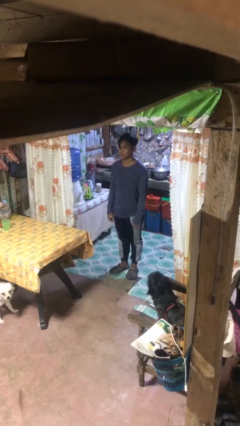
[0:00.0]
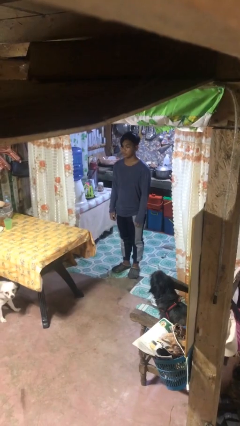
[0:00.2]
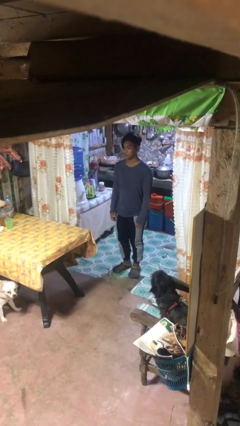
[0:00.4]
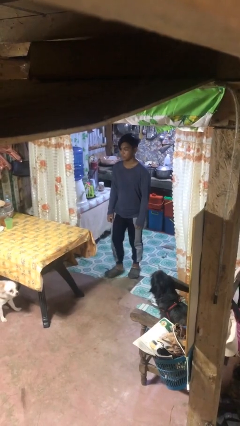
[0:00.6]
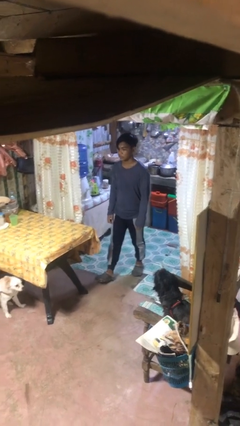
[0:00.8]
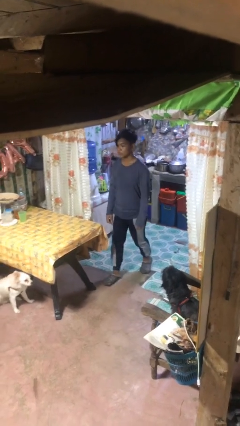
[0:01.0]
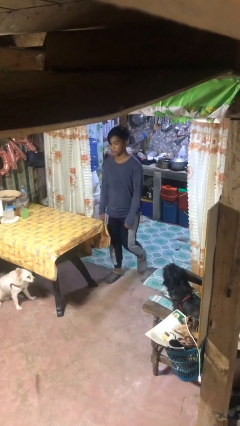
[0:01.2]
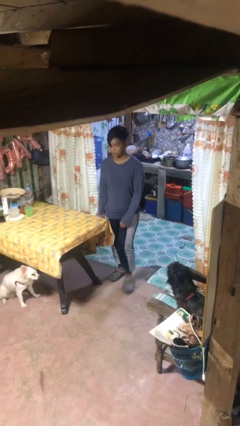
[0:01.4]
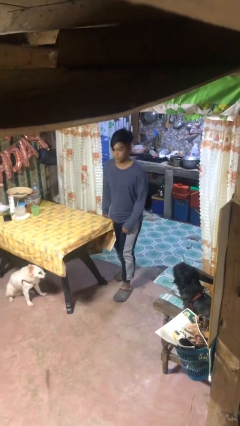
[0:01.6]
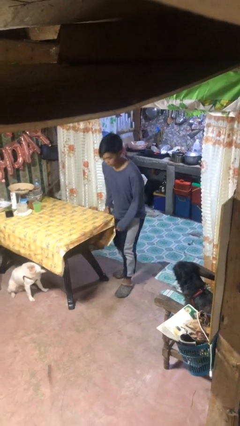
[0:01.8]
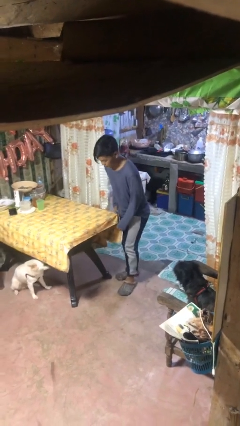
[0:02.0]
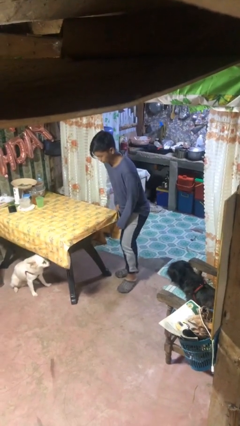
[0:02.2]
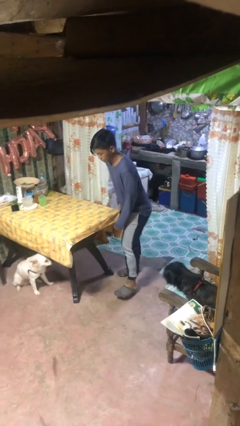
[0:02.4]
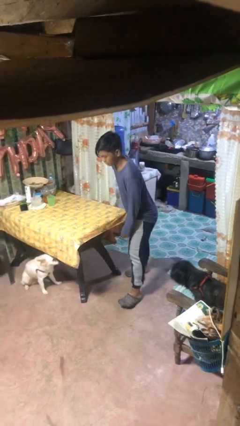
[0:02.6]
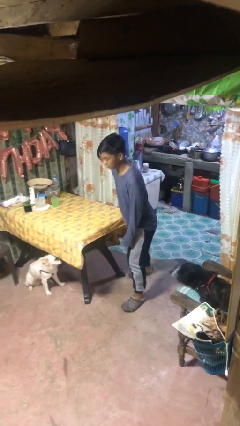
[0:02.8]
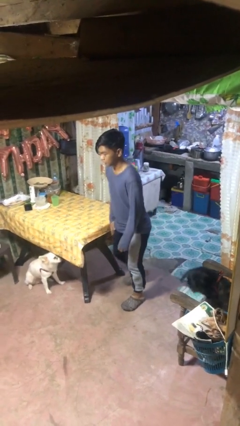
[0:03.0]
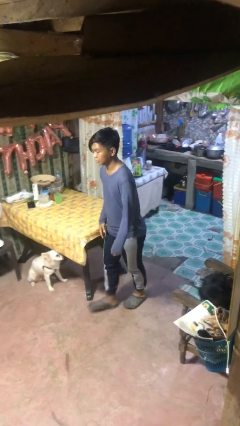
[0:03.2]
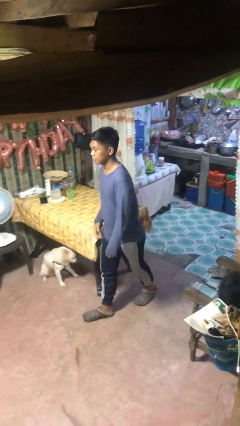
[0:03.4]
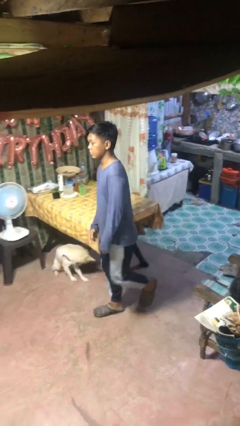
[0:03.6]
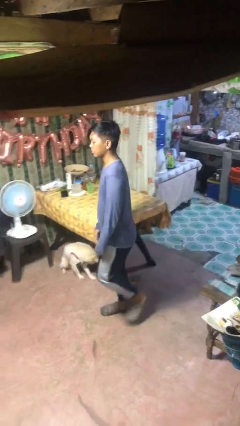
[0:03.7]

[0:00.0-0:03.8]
person bumps into table

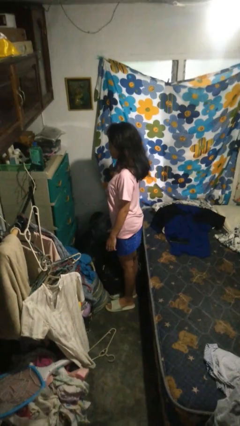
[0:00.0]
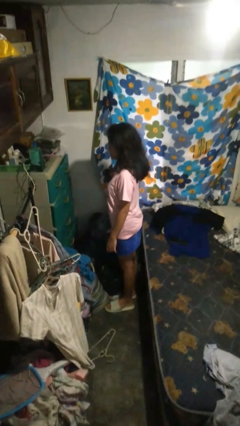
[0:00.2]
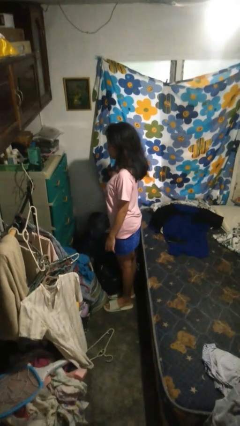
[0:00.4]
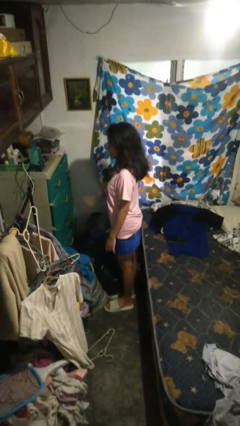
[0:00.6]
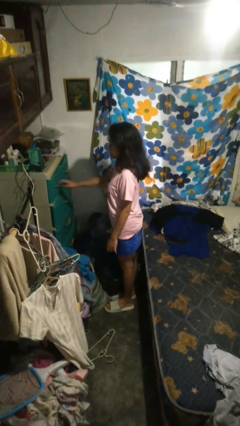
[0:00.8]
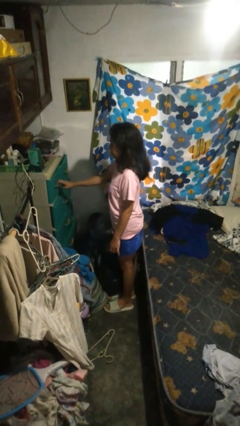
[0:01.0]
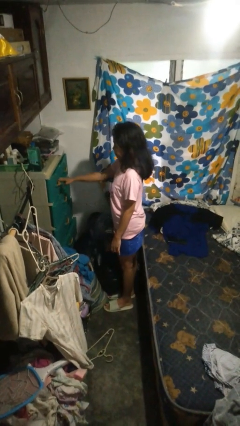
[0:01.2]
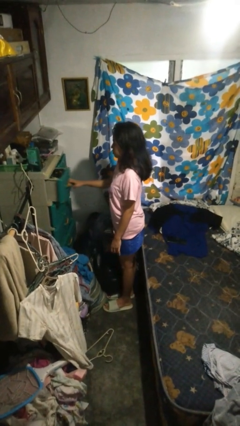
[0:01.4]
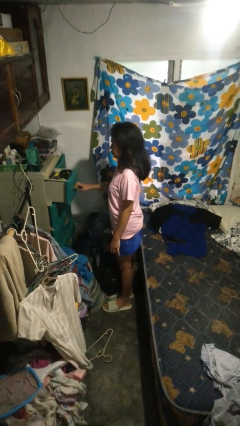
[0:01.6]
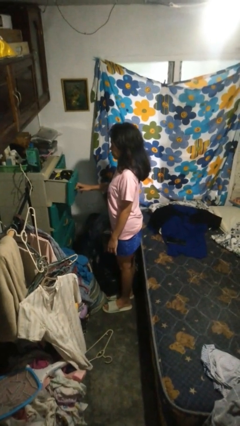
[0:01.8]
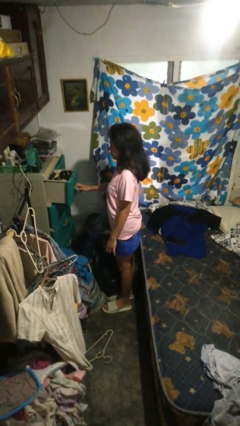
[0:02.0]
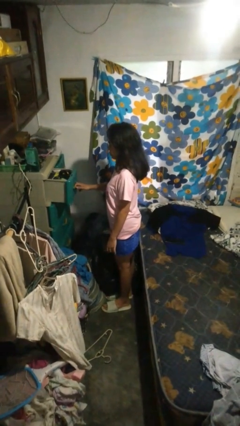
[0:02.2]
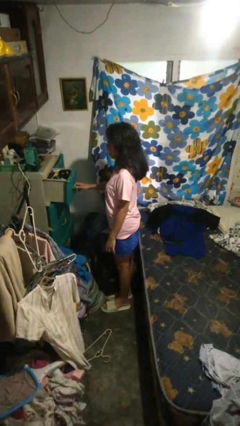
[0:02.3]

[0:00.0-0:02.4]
person opens dresser drawer

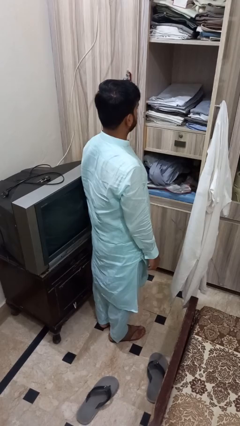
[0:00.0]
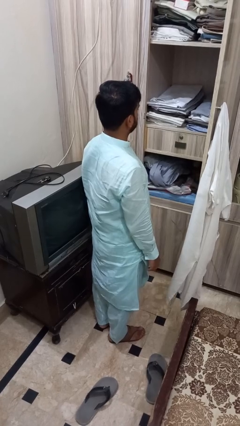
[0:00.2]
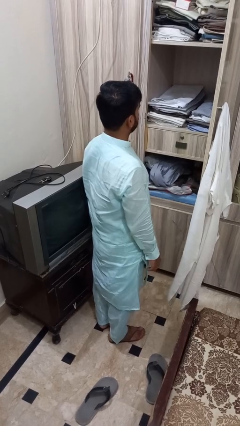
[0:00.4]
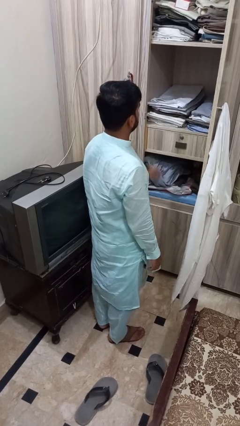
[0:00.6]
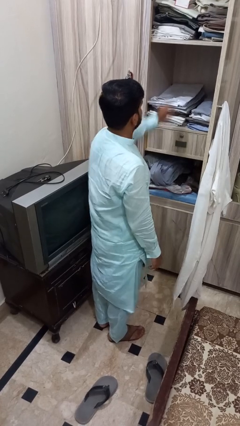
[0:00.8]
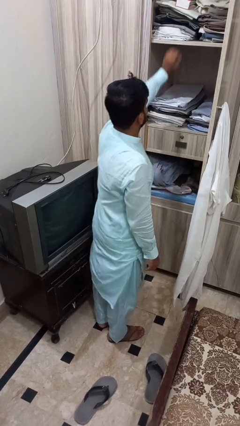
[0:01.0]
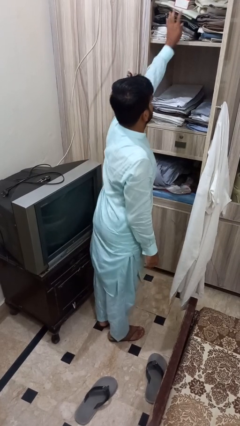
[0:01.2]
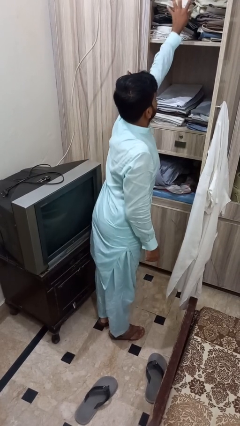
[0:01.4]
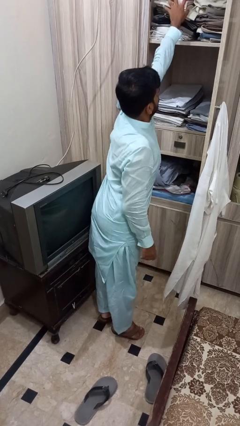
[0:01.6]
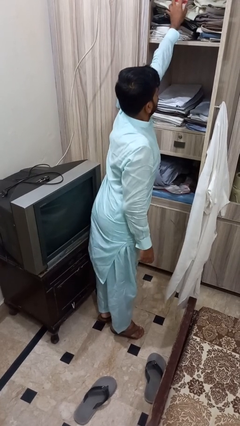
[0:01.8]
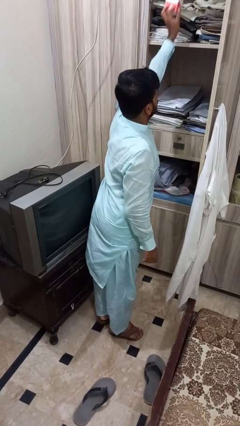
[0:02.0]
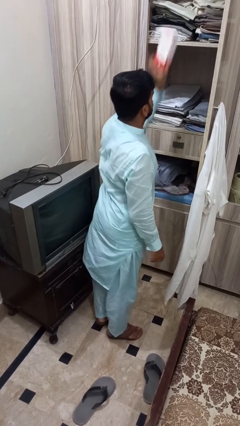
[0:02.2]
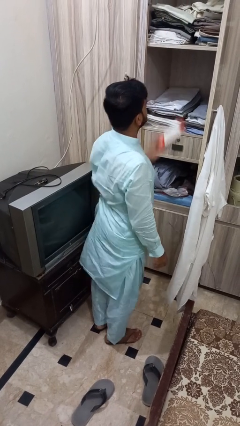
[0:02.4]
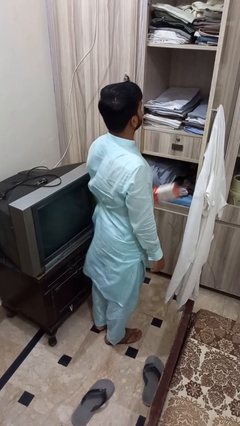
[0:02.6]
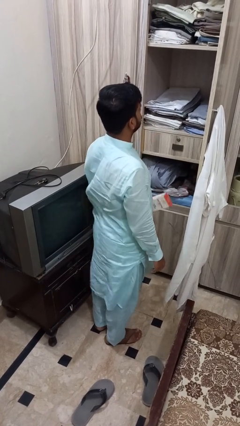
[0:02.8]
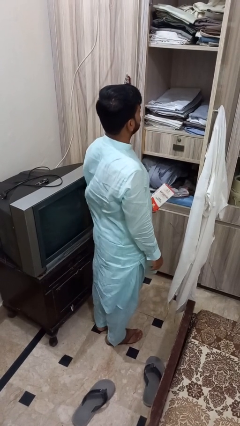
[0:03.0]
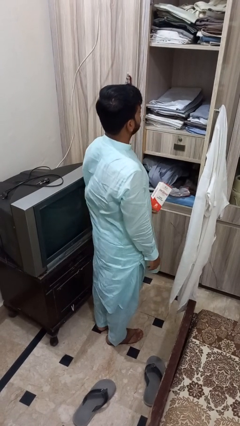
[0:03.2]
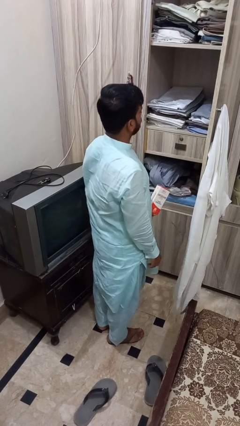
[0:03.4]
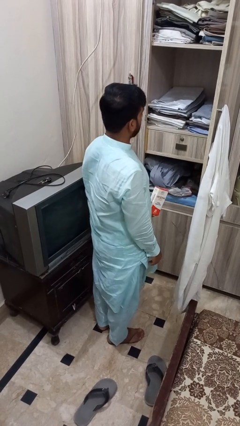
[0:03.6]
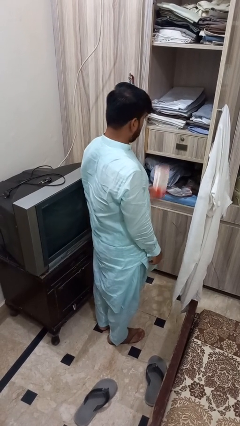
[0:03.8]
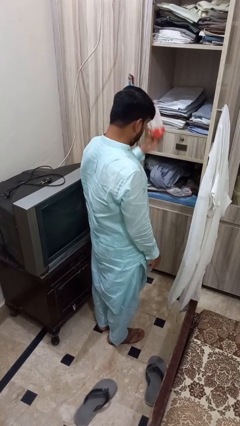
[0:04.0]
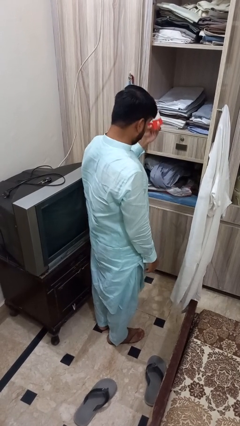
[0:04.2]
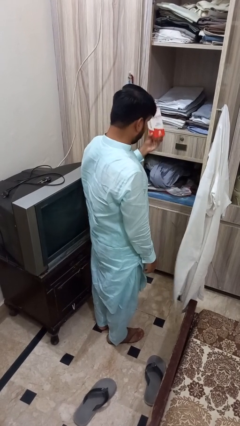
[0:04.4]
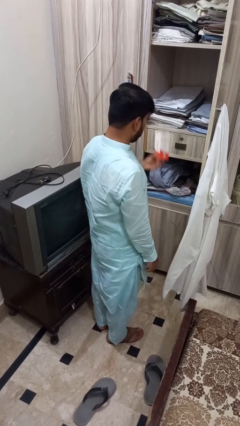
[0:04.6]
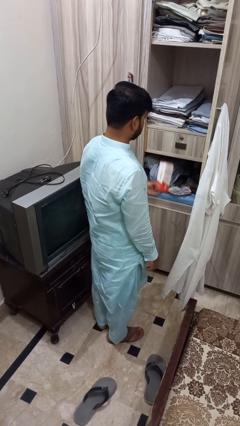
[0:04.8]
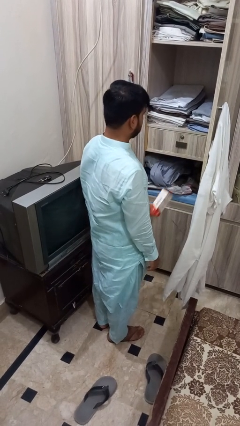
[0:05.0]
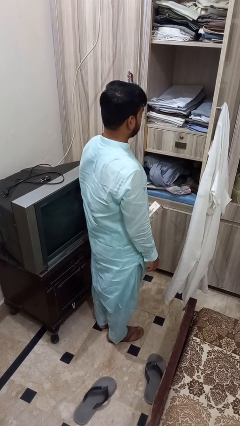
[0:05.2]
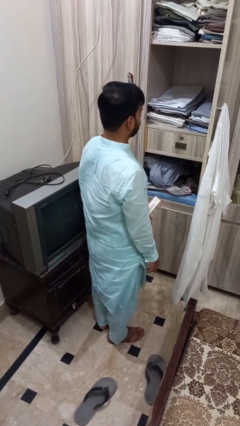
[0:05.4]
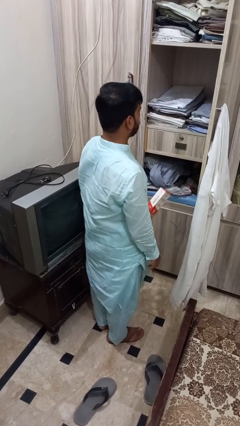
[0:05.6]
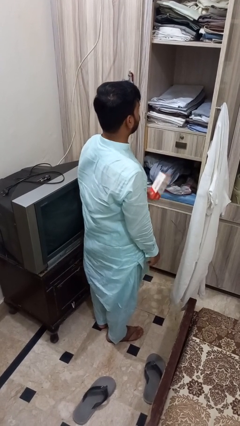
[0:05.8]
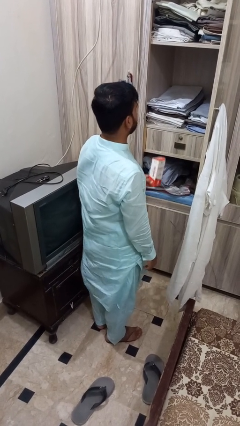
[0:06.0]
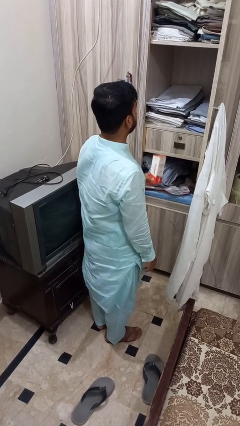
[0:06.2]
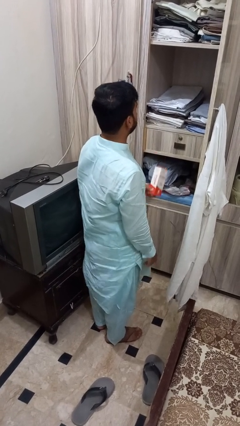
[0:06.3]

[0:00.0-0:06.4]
person picks up object from shelf

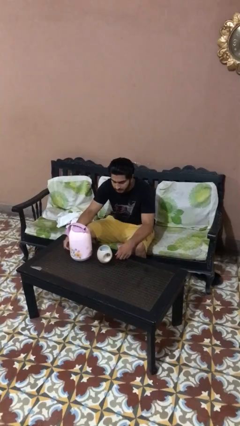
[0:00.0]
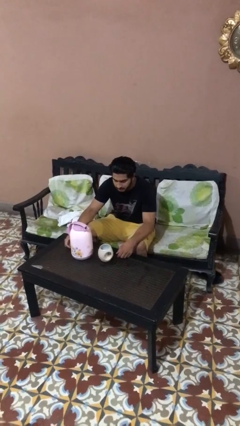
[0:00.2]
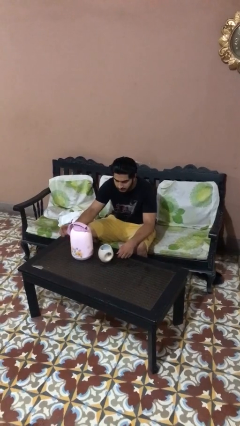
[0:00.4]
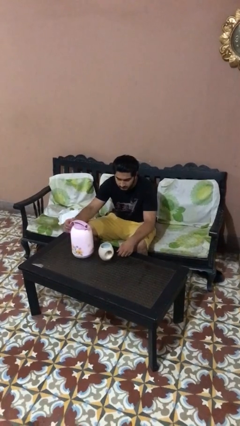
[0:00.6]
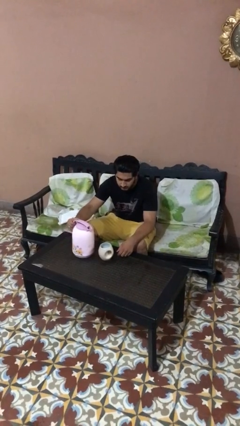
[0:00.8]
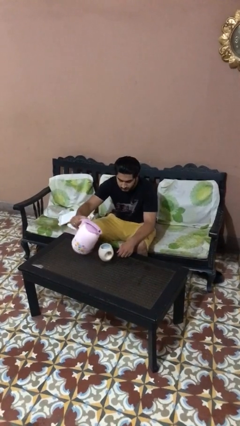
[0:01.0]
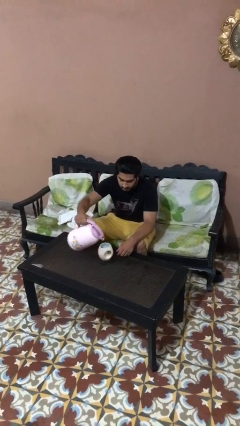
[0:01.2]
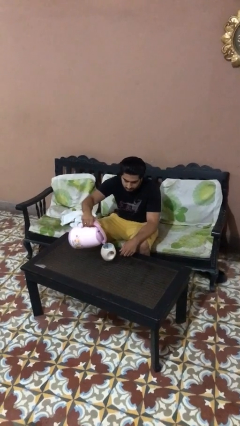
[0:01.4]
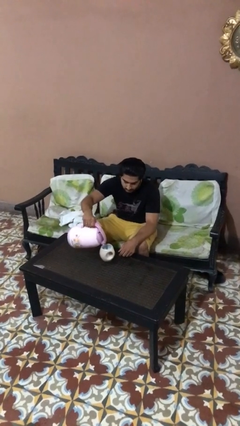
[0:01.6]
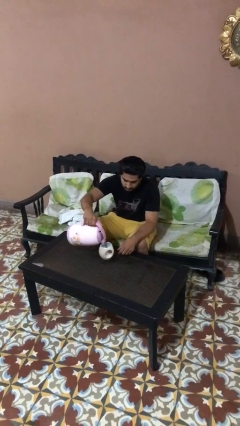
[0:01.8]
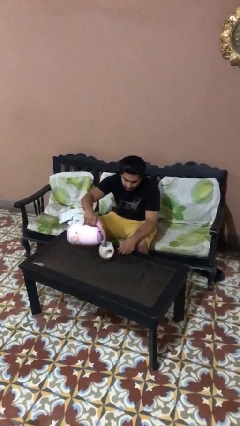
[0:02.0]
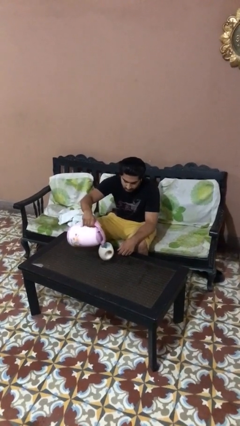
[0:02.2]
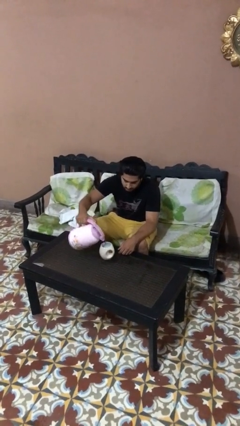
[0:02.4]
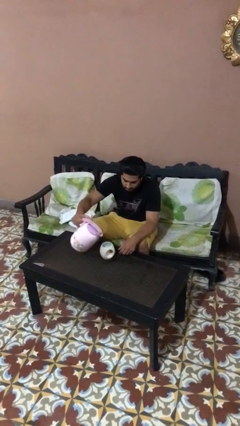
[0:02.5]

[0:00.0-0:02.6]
person pours coffee into mug

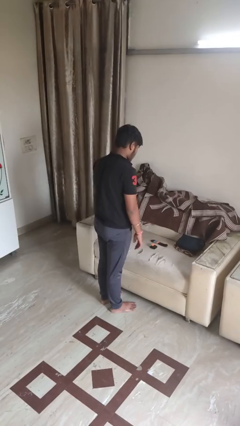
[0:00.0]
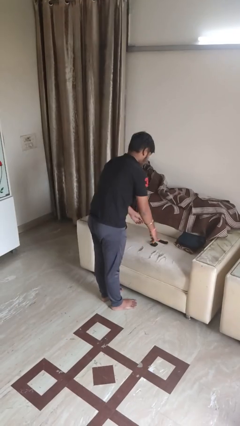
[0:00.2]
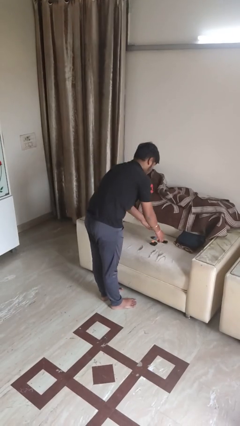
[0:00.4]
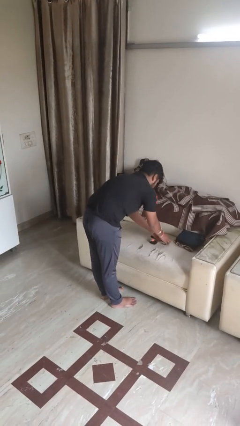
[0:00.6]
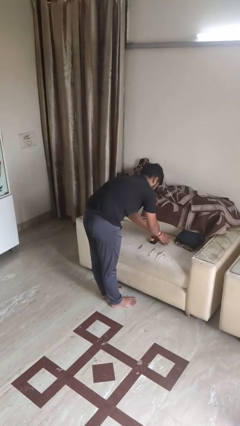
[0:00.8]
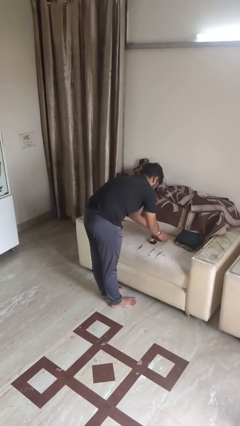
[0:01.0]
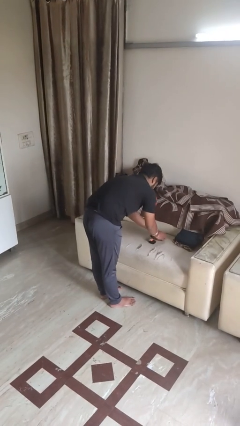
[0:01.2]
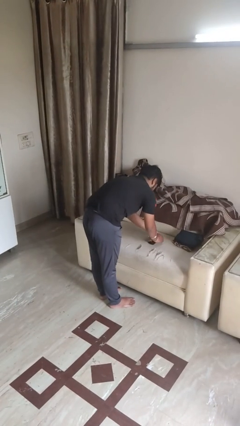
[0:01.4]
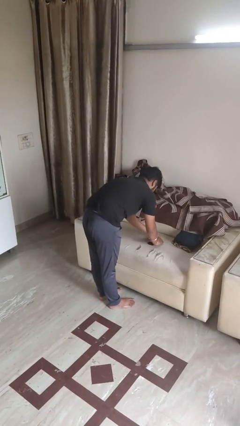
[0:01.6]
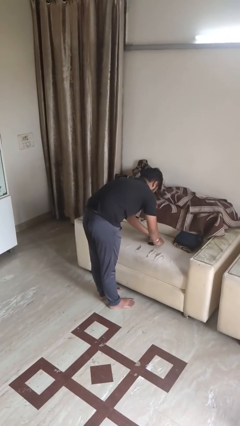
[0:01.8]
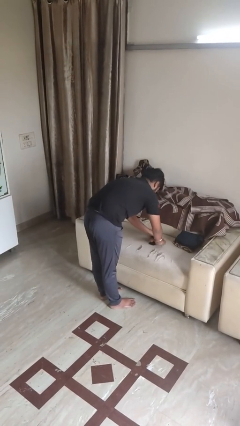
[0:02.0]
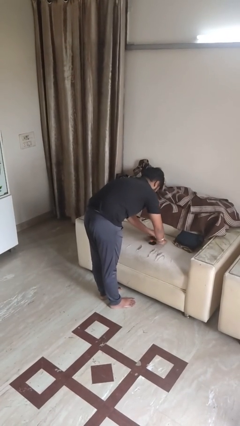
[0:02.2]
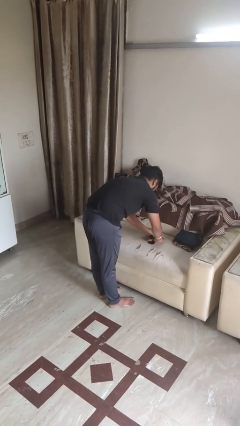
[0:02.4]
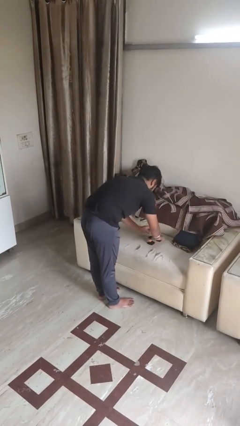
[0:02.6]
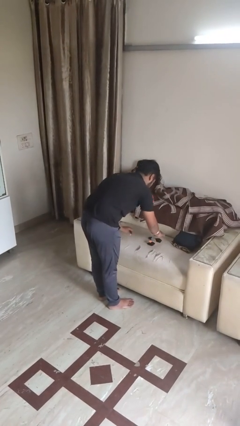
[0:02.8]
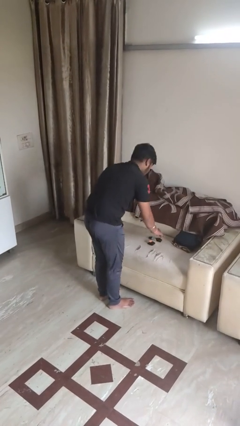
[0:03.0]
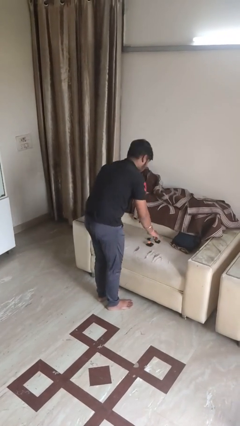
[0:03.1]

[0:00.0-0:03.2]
person folds socks
